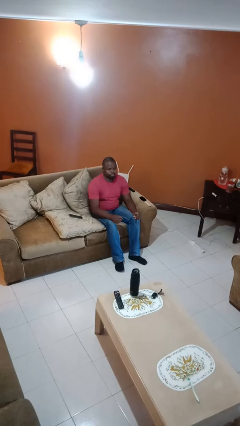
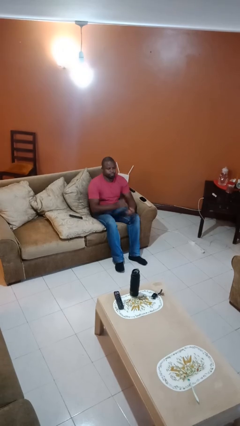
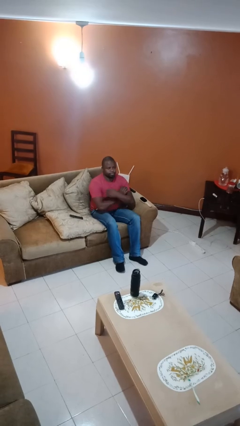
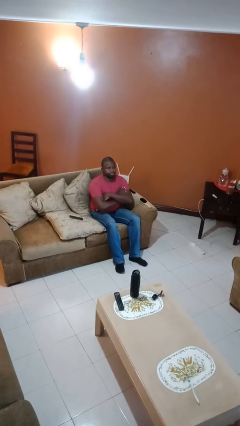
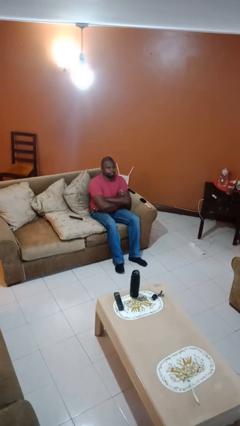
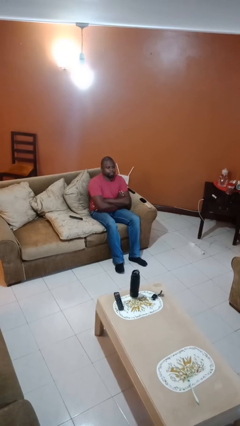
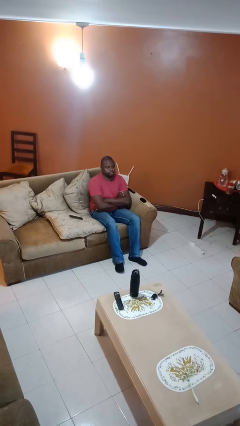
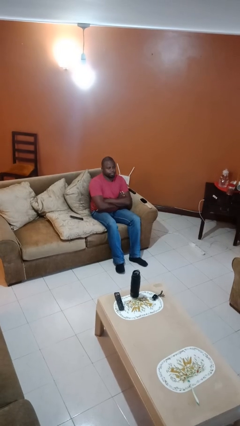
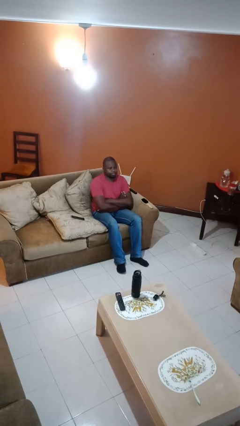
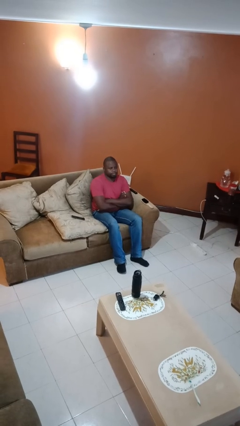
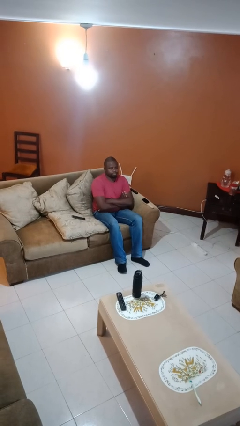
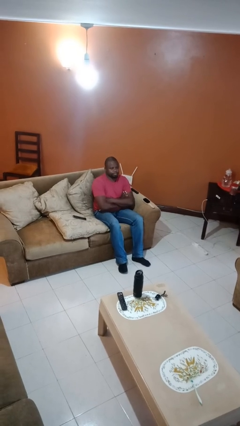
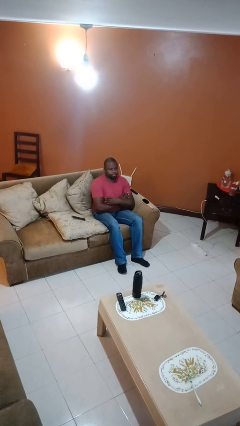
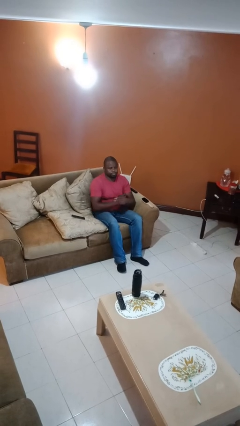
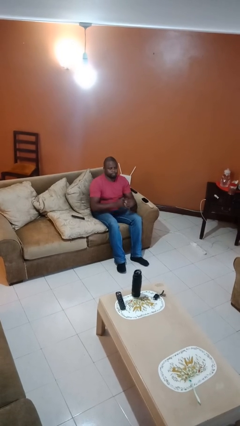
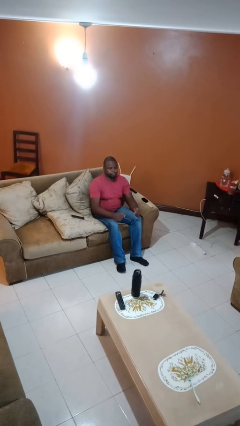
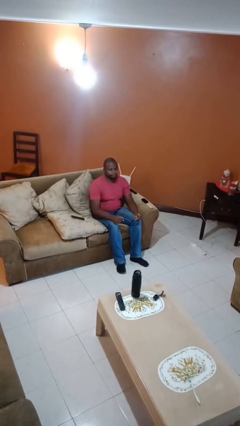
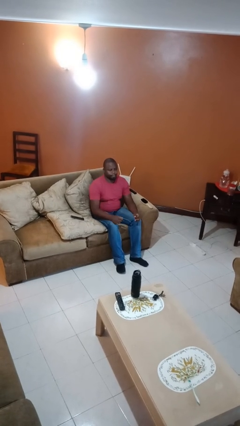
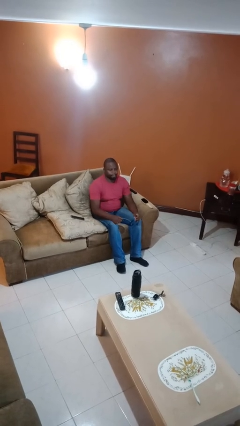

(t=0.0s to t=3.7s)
person crosses arms

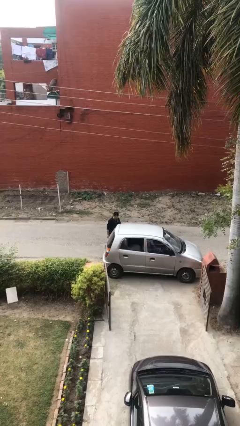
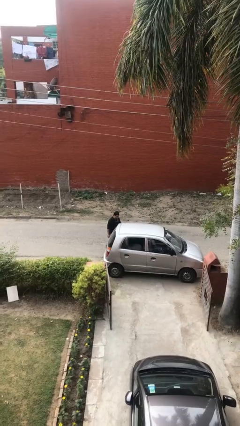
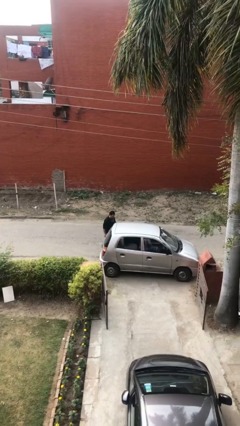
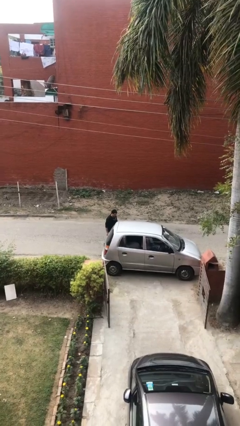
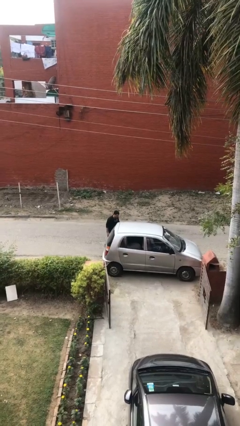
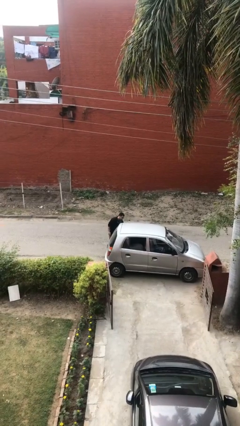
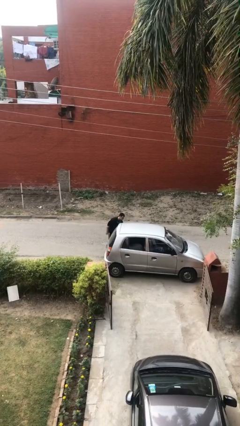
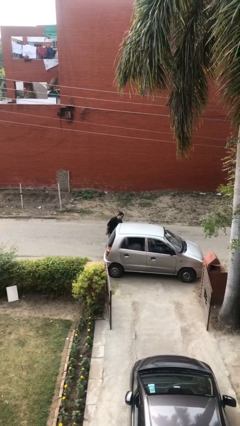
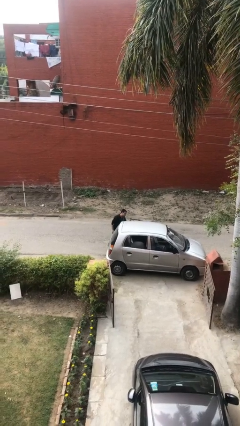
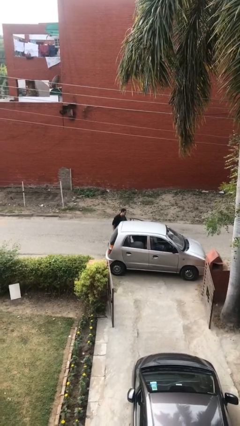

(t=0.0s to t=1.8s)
person opens car door

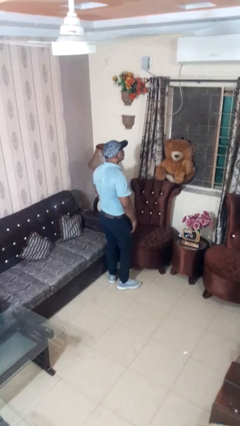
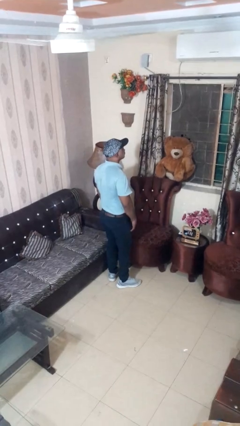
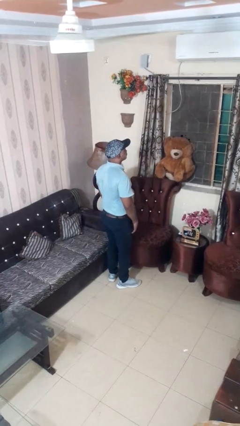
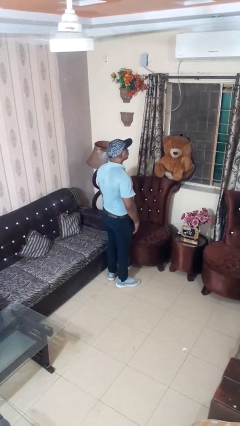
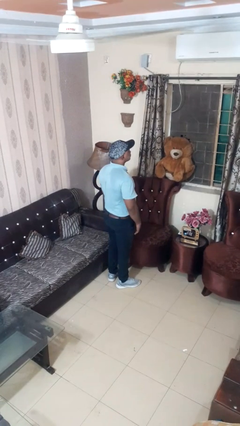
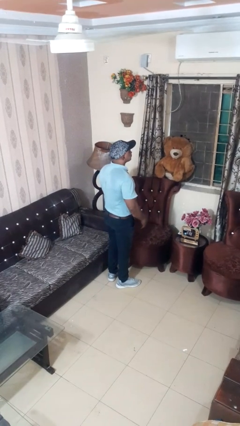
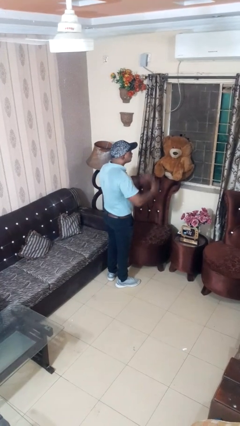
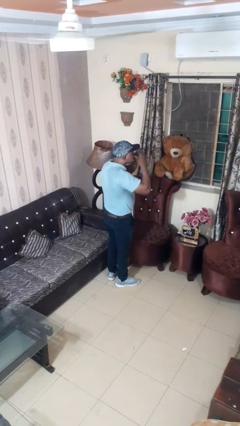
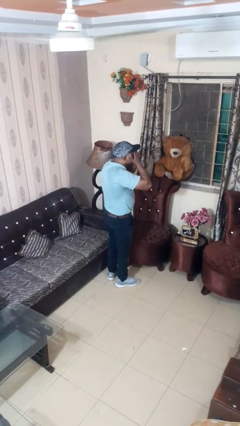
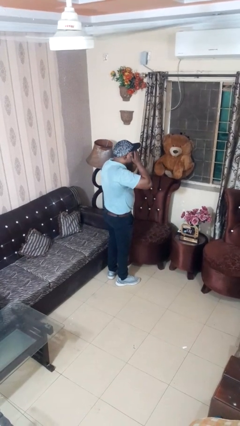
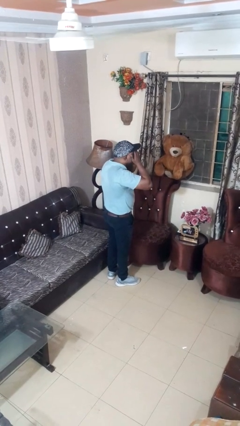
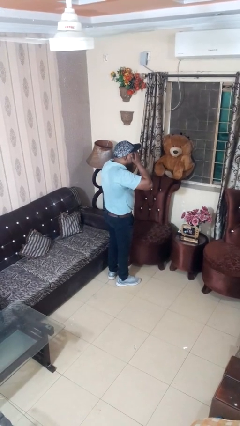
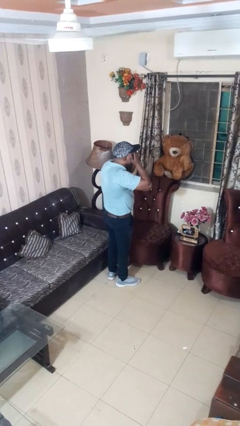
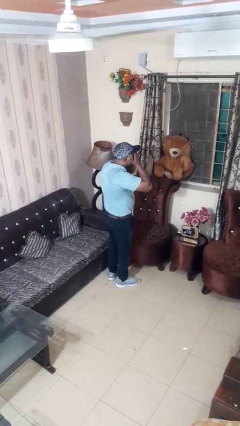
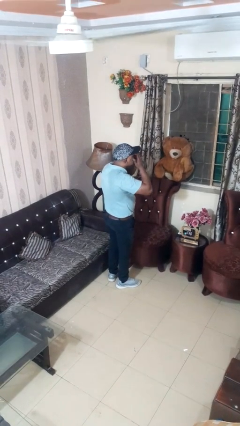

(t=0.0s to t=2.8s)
person covers face with hands

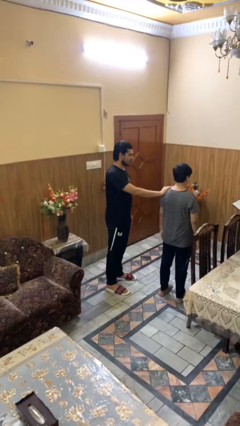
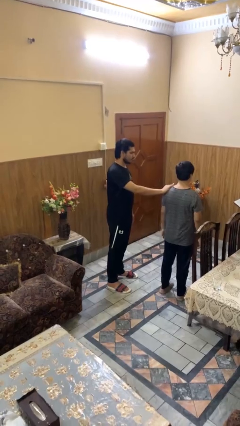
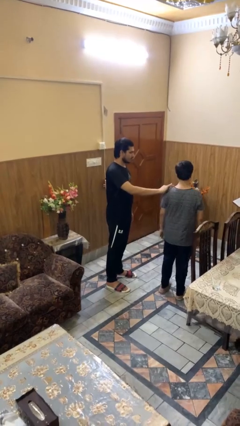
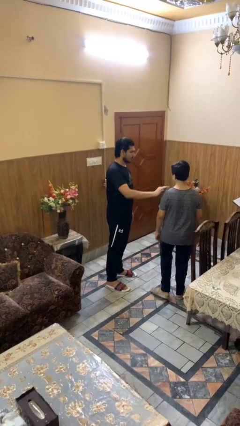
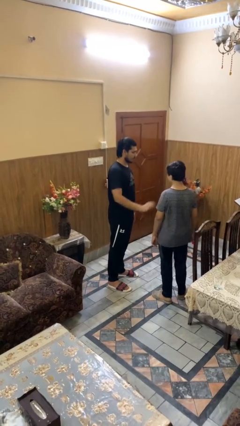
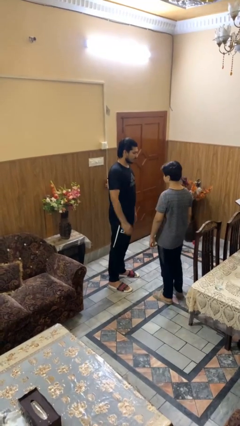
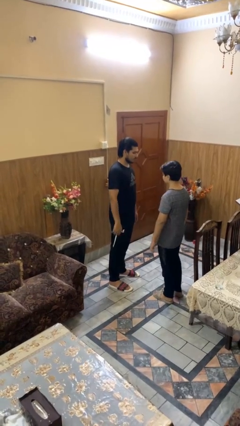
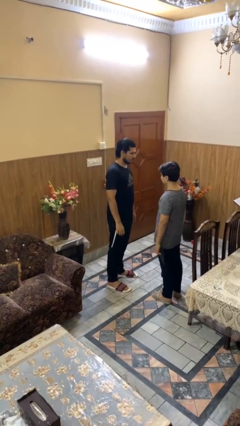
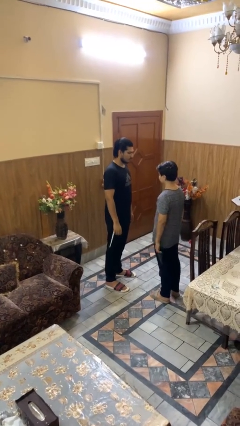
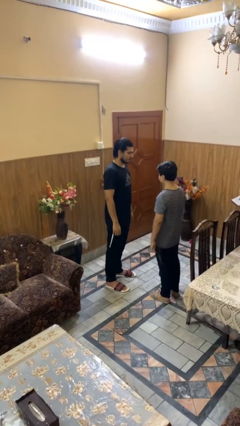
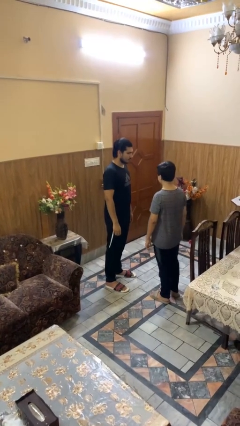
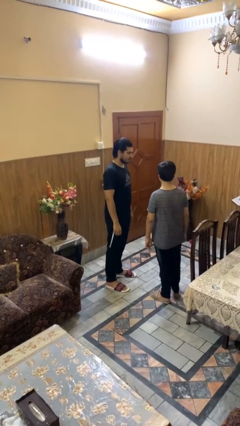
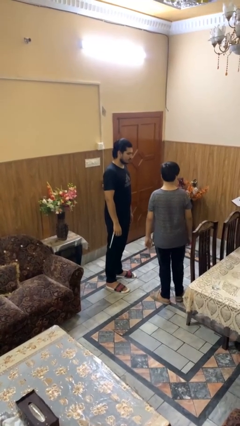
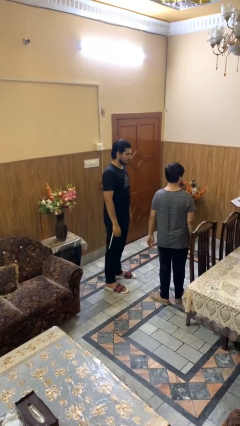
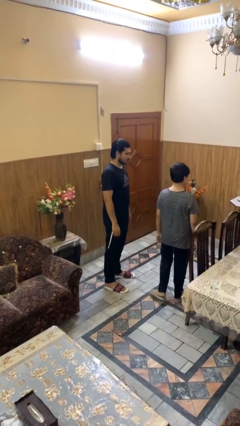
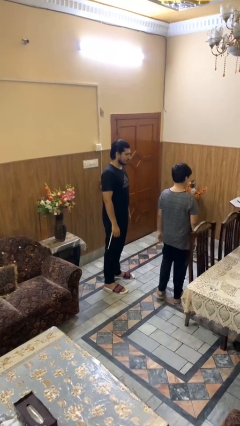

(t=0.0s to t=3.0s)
person spins person around

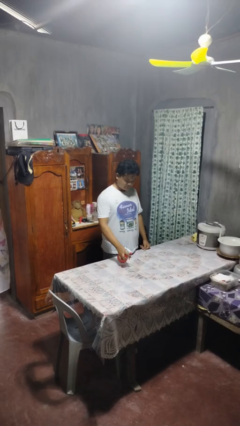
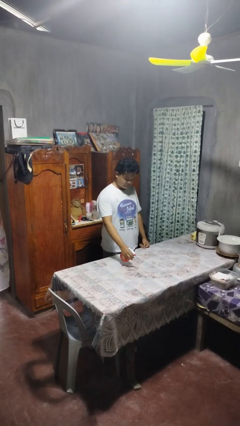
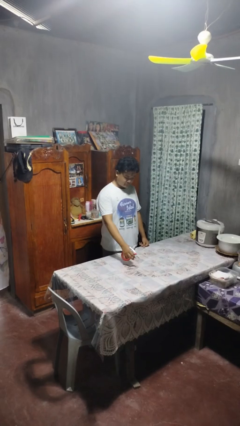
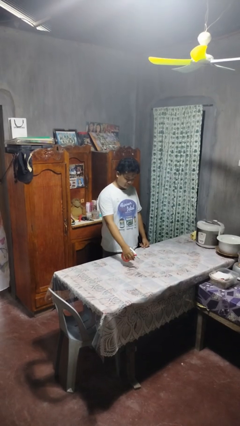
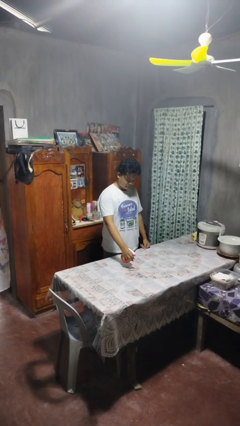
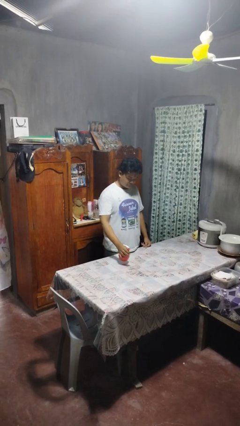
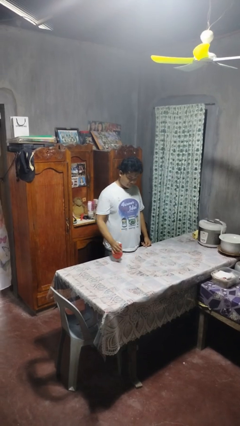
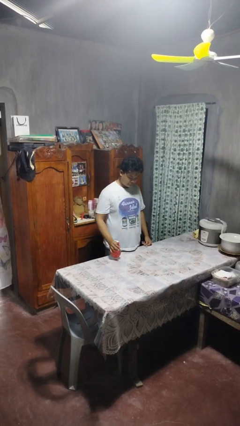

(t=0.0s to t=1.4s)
person sprays from bottle

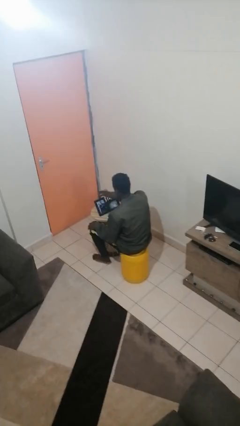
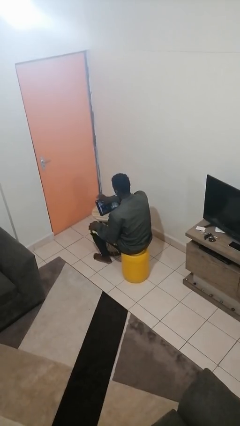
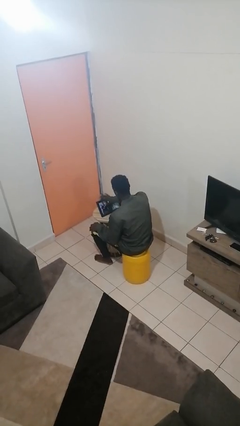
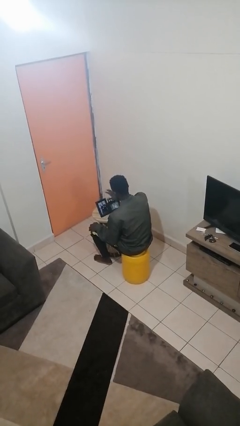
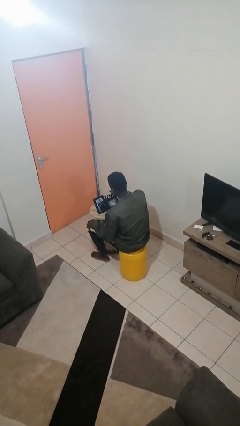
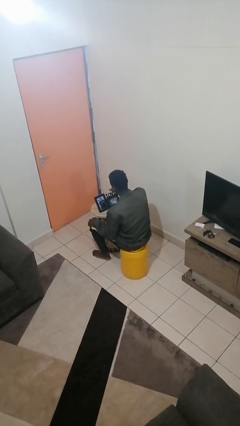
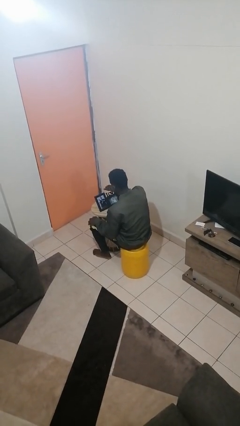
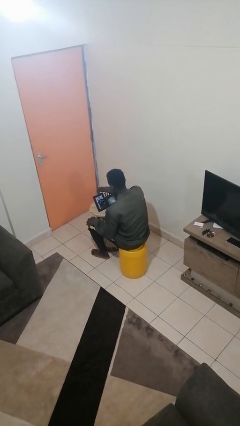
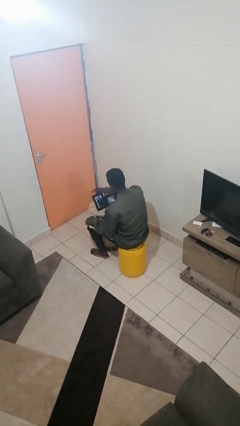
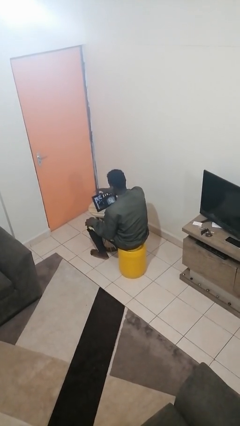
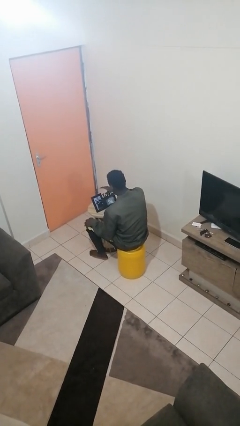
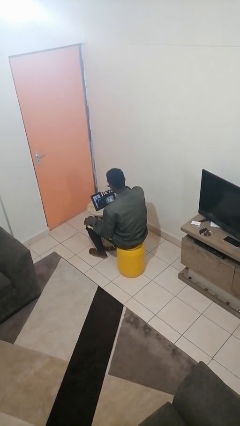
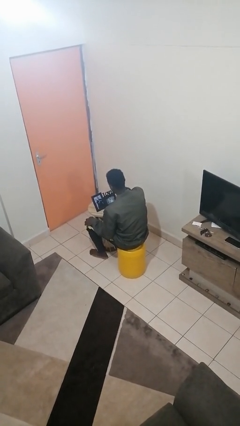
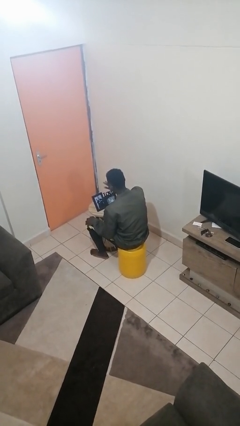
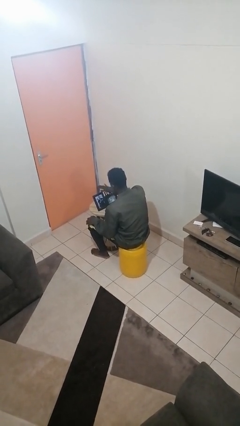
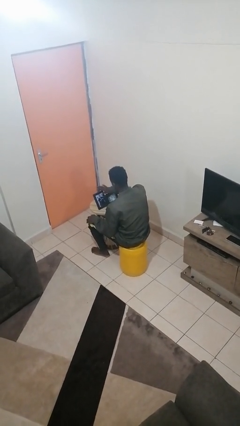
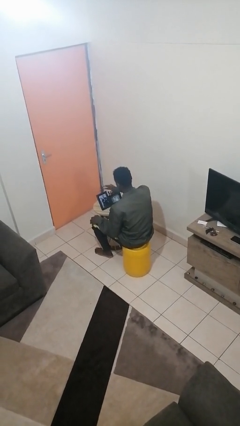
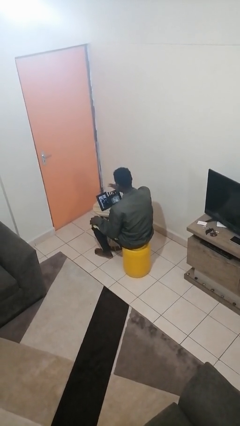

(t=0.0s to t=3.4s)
person waves hand over object

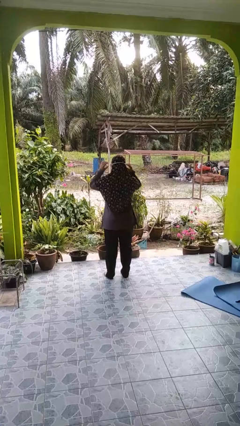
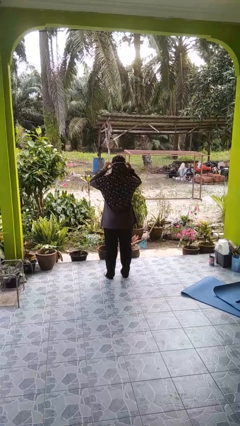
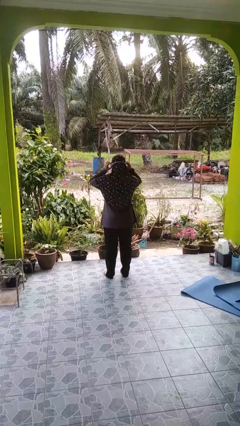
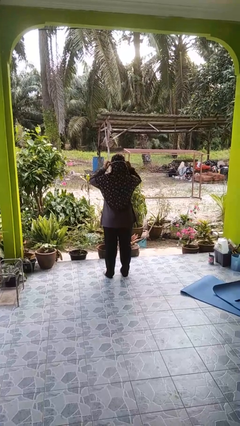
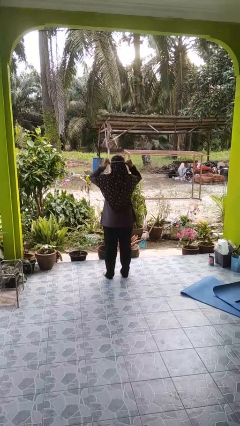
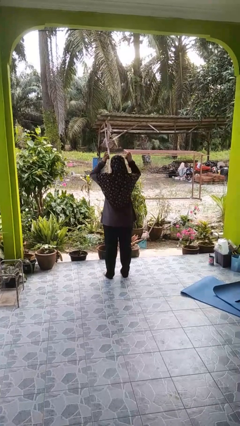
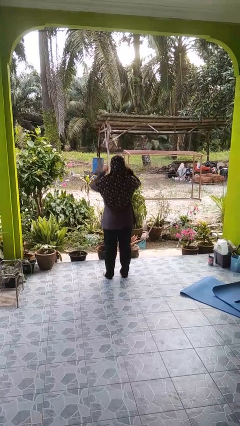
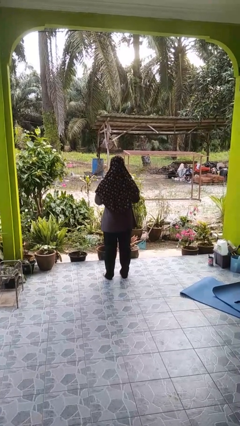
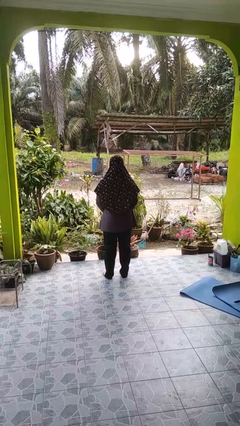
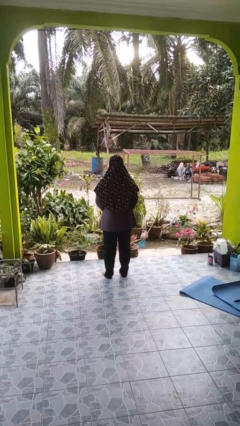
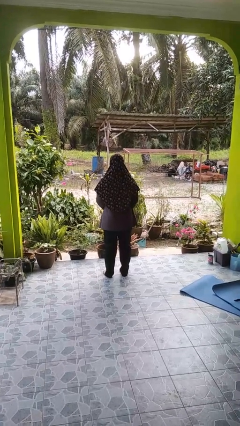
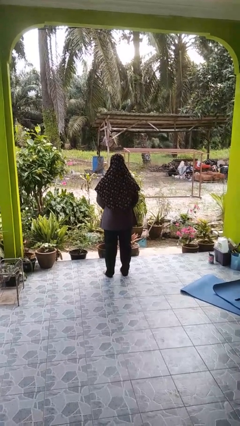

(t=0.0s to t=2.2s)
person takes off facemask
